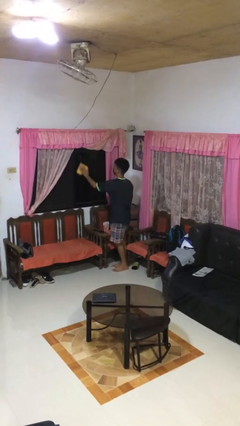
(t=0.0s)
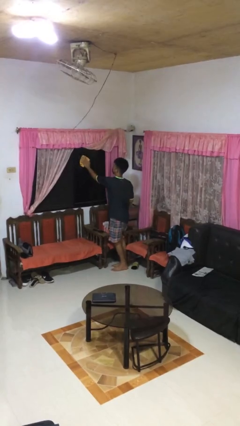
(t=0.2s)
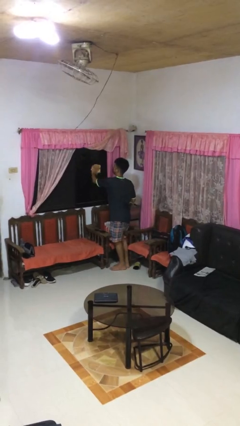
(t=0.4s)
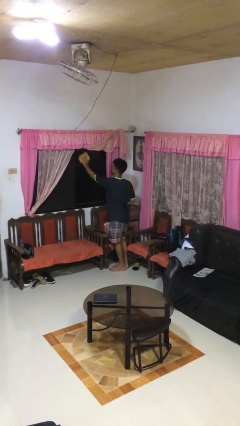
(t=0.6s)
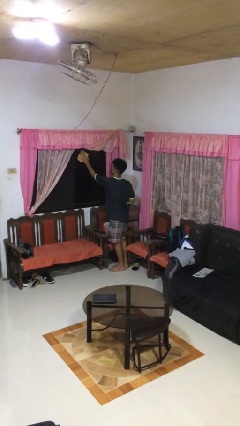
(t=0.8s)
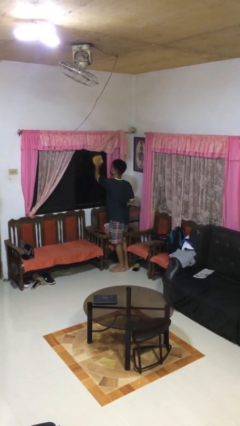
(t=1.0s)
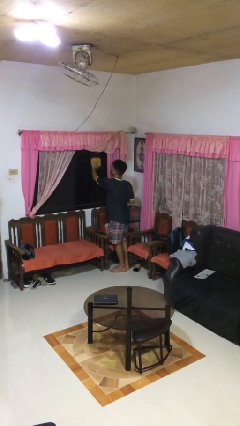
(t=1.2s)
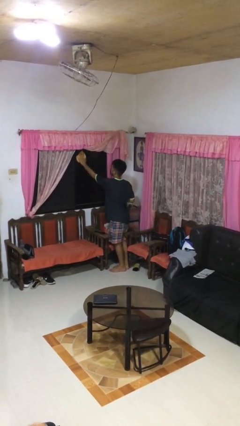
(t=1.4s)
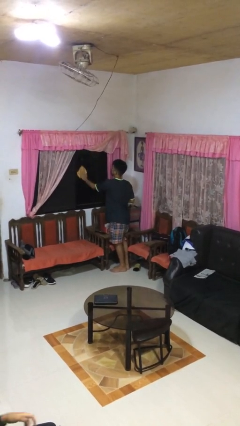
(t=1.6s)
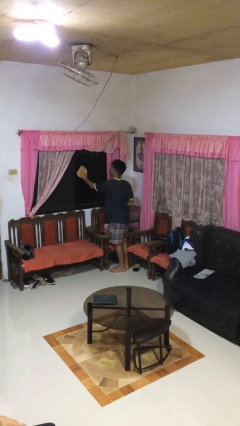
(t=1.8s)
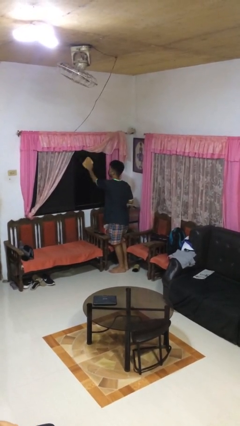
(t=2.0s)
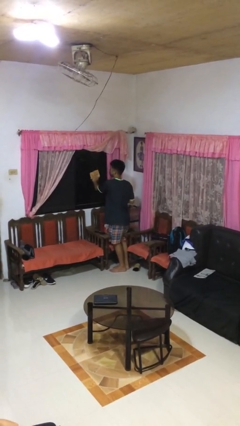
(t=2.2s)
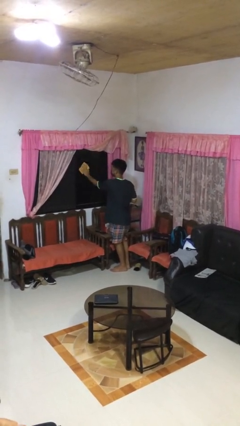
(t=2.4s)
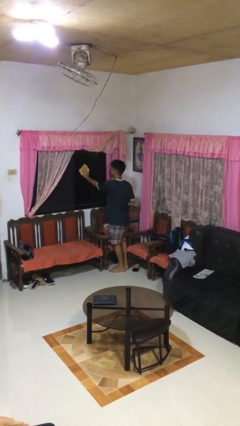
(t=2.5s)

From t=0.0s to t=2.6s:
person washes window

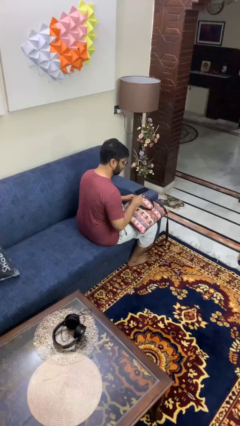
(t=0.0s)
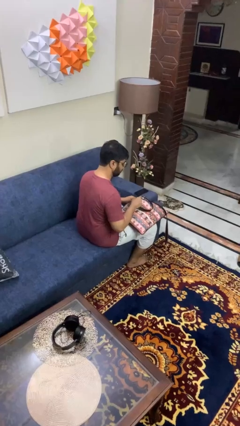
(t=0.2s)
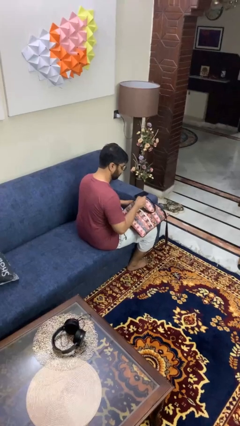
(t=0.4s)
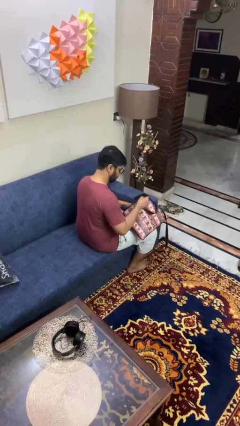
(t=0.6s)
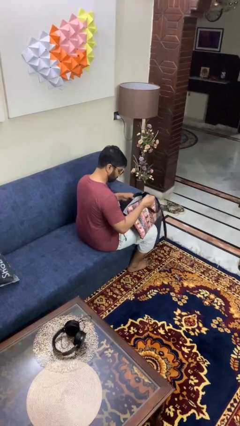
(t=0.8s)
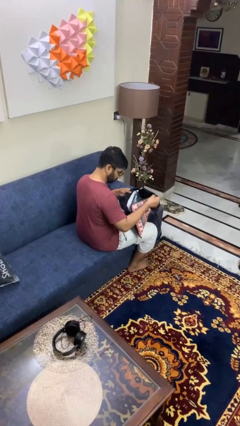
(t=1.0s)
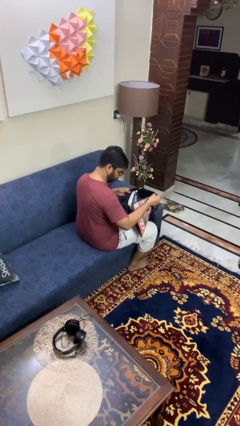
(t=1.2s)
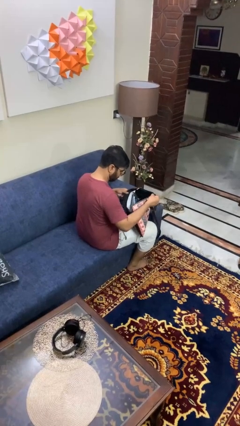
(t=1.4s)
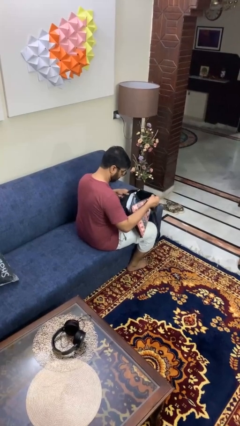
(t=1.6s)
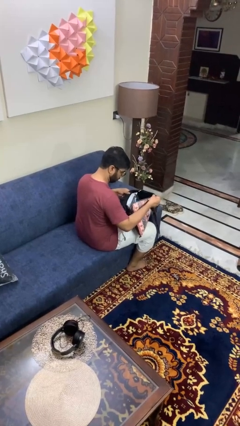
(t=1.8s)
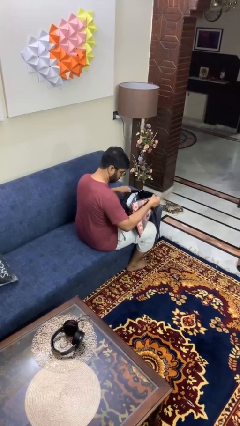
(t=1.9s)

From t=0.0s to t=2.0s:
person searches in purse

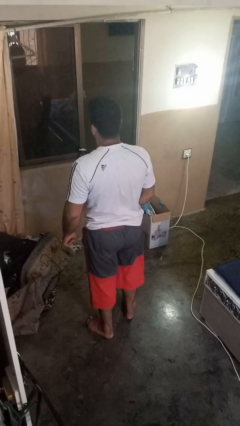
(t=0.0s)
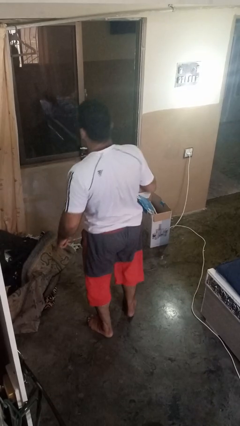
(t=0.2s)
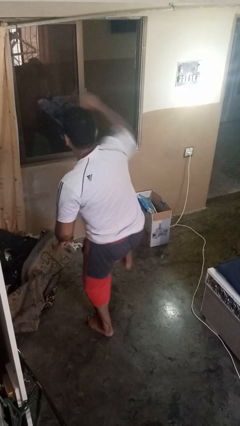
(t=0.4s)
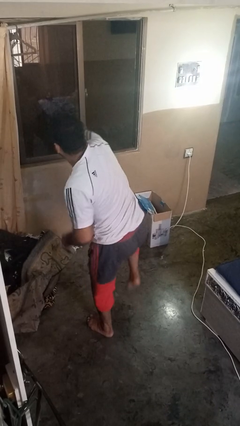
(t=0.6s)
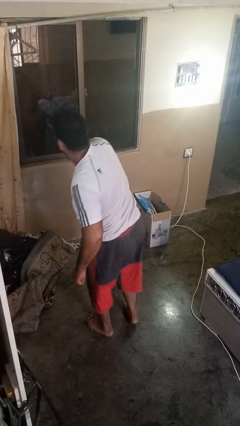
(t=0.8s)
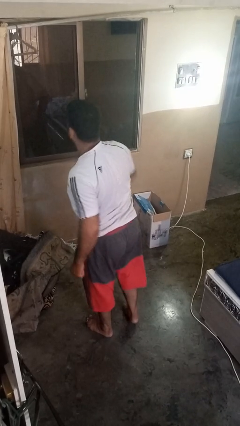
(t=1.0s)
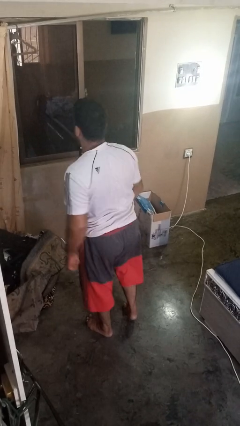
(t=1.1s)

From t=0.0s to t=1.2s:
person karate chop

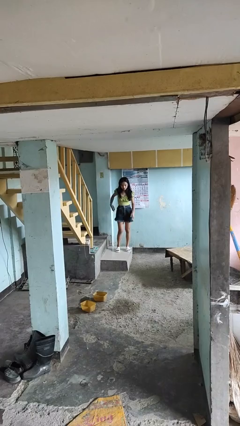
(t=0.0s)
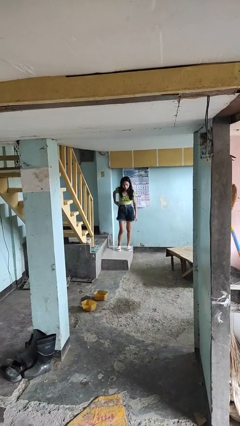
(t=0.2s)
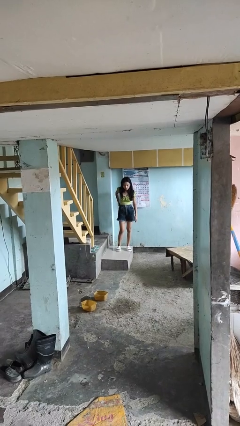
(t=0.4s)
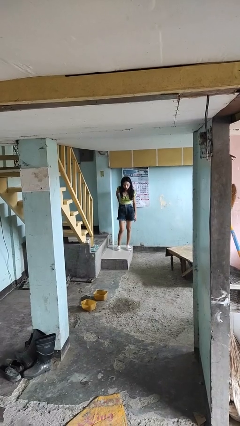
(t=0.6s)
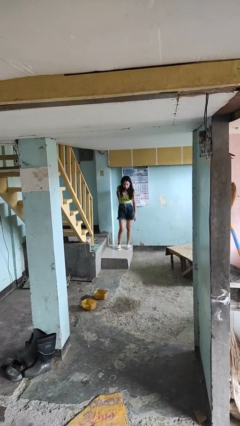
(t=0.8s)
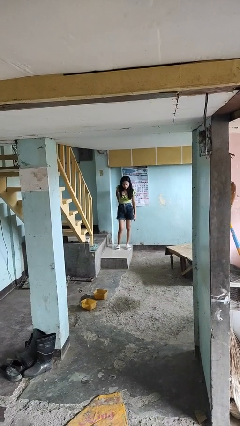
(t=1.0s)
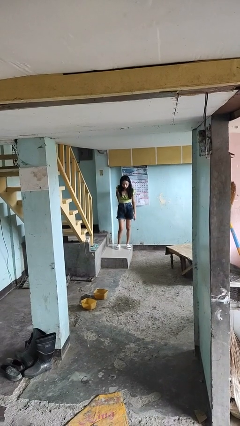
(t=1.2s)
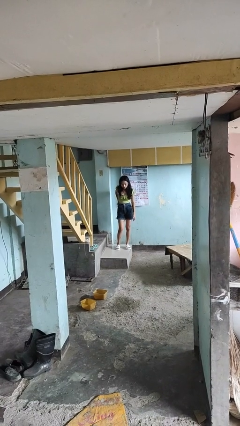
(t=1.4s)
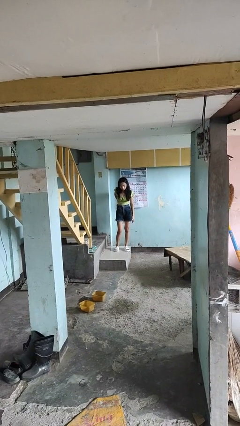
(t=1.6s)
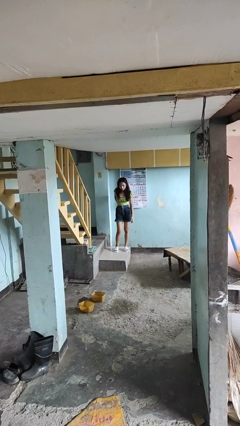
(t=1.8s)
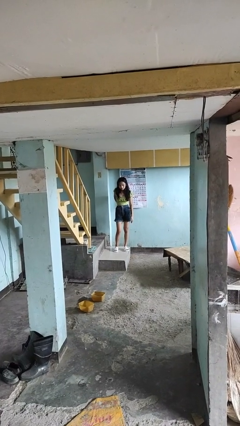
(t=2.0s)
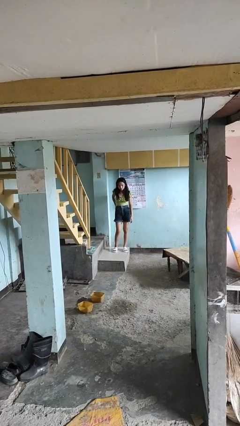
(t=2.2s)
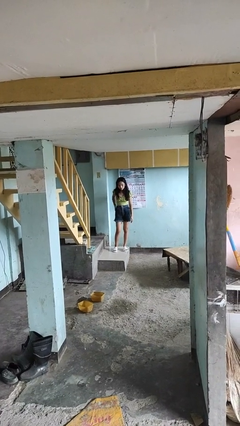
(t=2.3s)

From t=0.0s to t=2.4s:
person puts phone into pocket

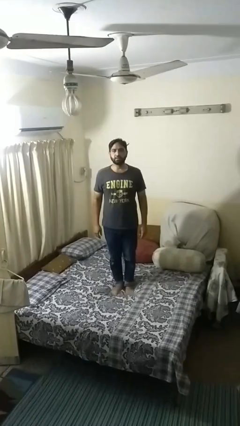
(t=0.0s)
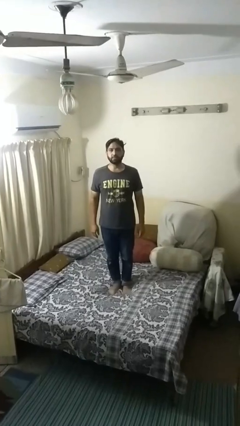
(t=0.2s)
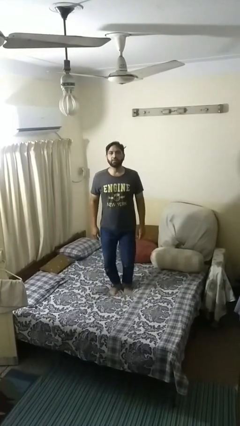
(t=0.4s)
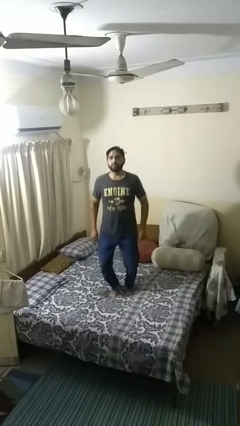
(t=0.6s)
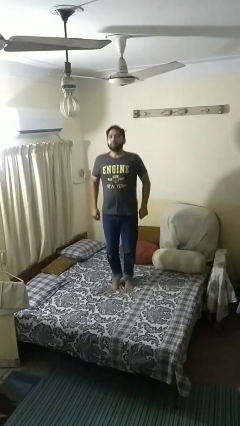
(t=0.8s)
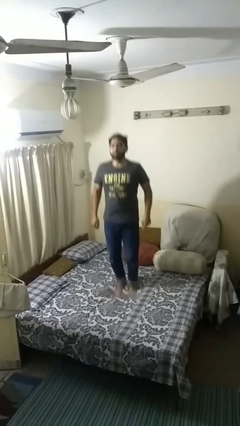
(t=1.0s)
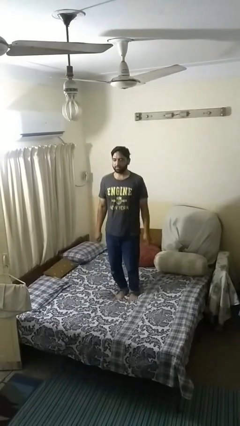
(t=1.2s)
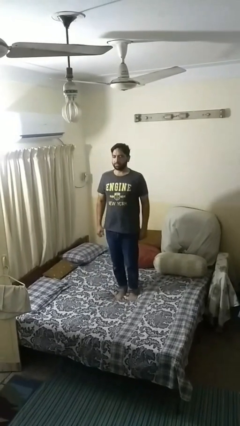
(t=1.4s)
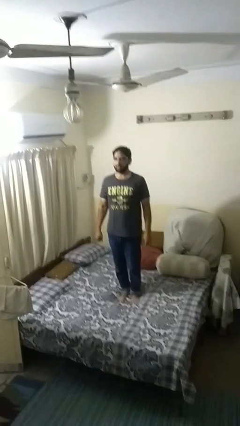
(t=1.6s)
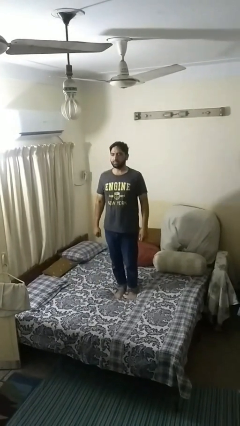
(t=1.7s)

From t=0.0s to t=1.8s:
person jumps on bed

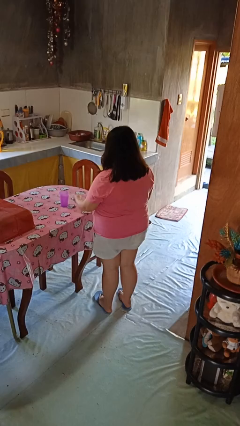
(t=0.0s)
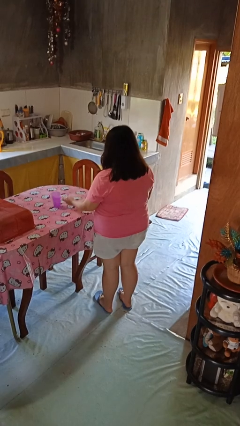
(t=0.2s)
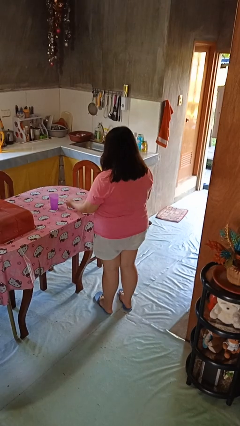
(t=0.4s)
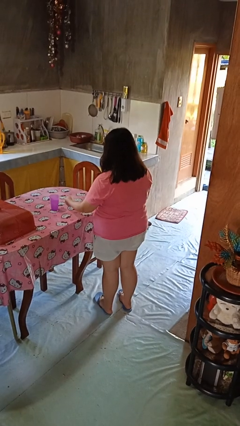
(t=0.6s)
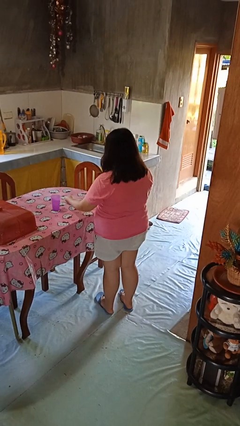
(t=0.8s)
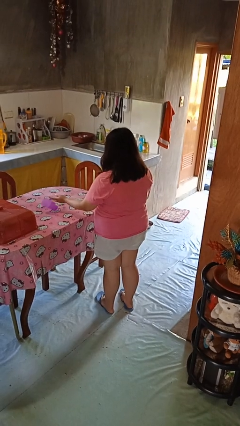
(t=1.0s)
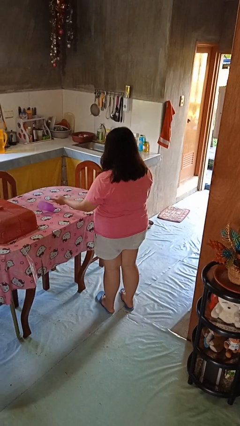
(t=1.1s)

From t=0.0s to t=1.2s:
person knocks over glass

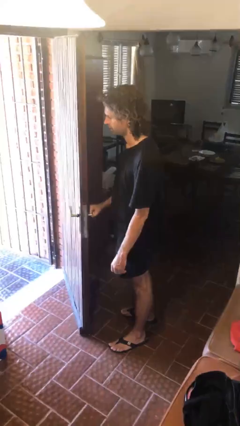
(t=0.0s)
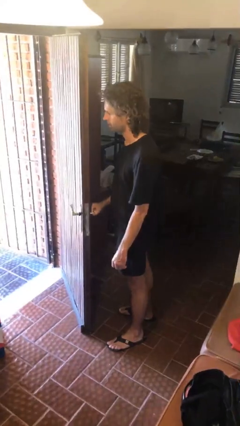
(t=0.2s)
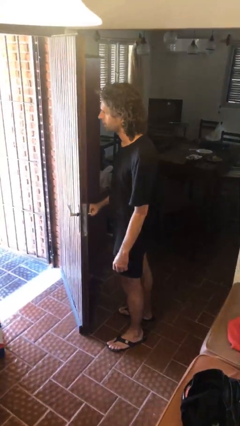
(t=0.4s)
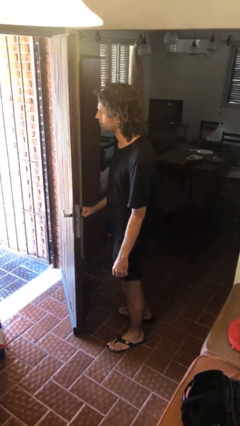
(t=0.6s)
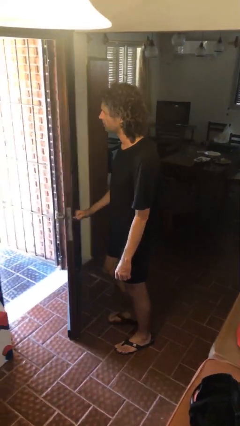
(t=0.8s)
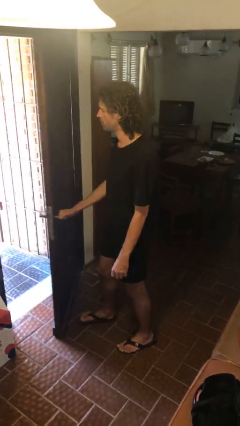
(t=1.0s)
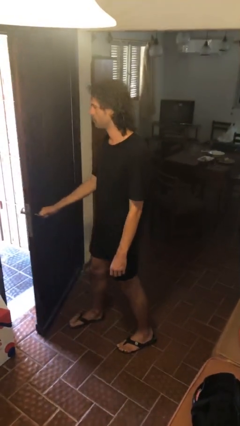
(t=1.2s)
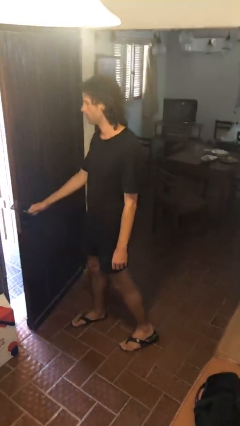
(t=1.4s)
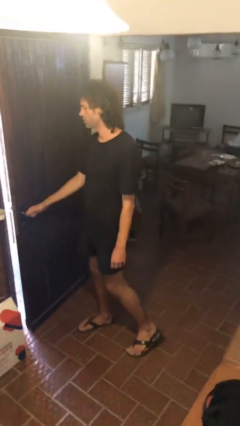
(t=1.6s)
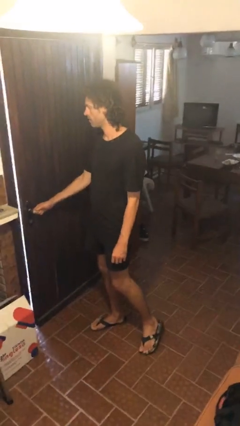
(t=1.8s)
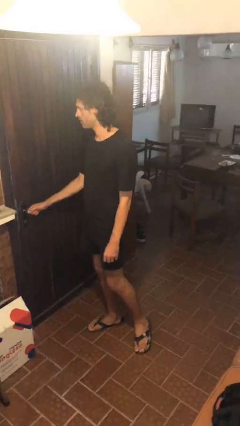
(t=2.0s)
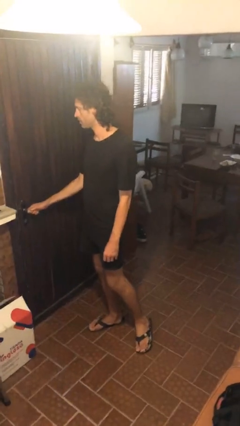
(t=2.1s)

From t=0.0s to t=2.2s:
person closes facility door

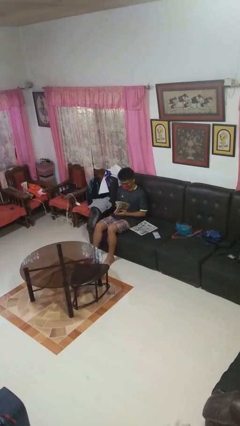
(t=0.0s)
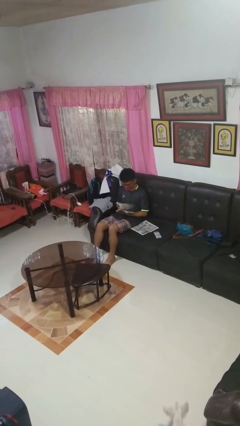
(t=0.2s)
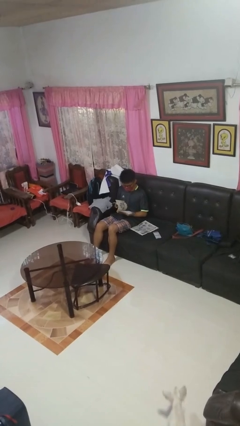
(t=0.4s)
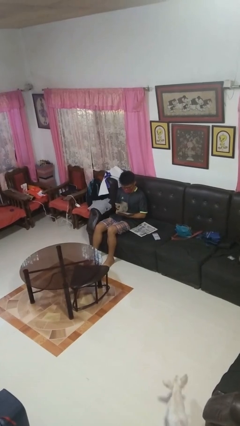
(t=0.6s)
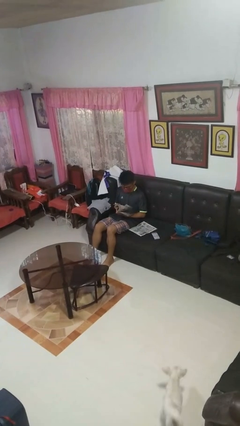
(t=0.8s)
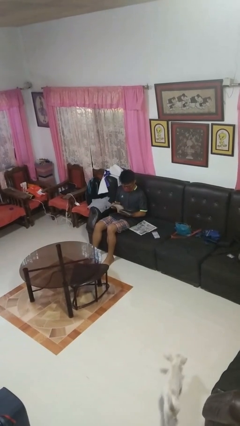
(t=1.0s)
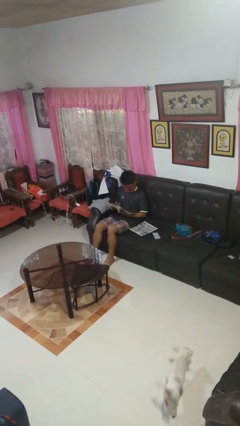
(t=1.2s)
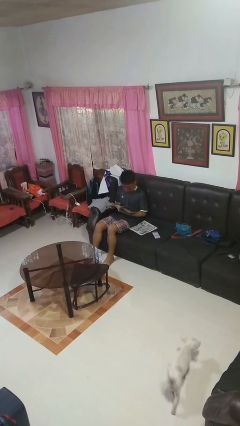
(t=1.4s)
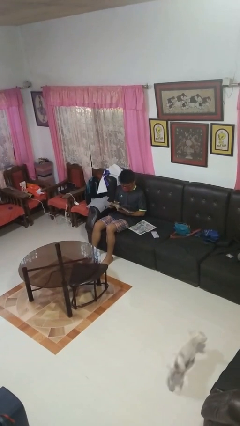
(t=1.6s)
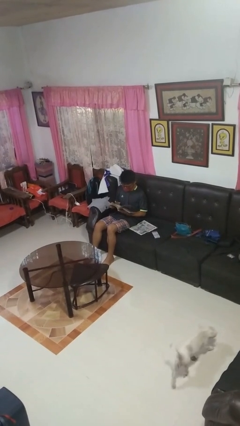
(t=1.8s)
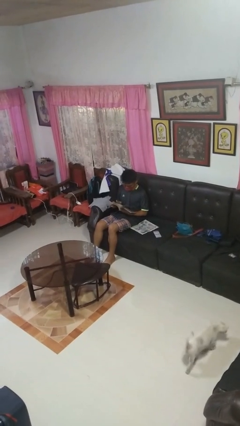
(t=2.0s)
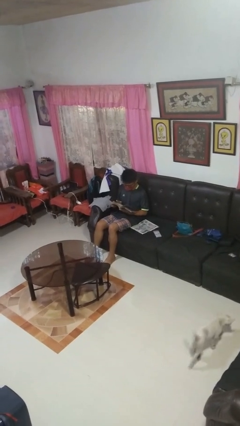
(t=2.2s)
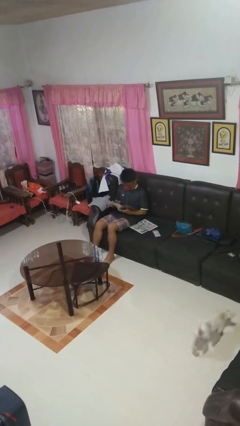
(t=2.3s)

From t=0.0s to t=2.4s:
person reads magazine

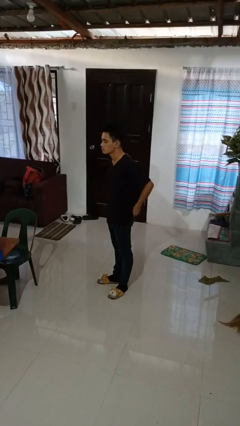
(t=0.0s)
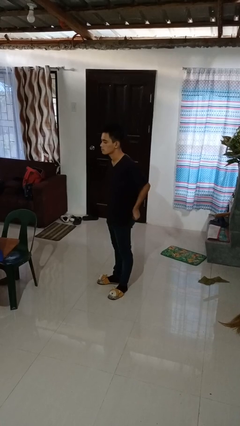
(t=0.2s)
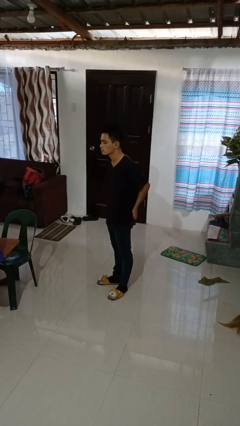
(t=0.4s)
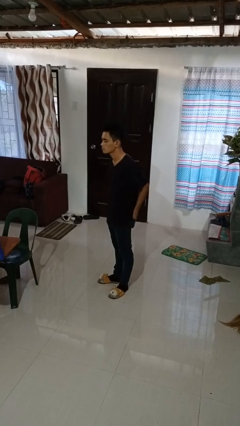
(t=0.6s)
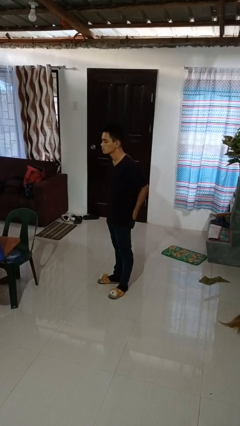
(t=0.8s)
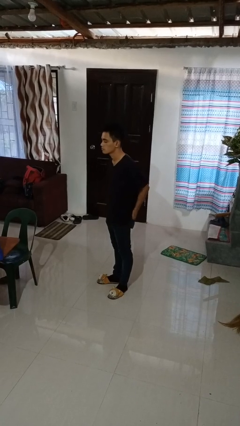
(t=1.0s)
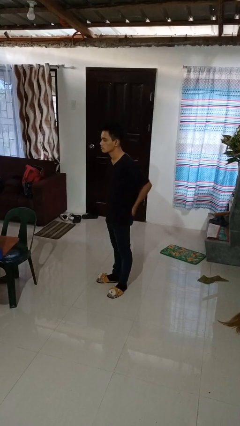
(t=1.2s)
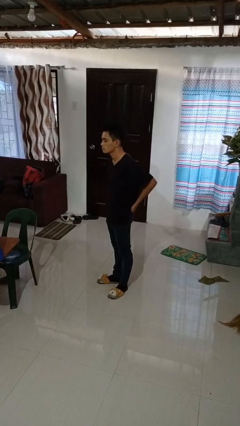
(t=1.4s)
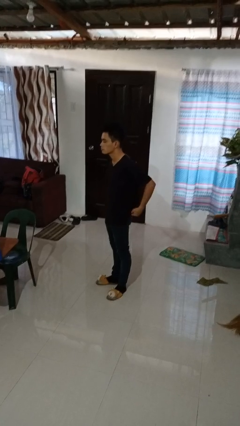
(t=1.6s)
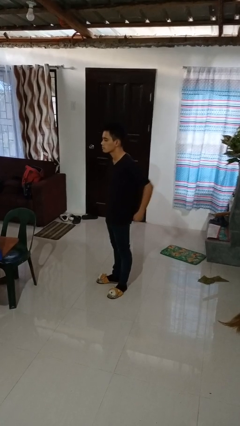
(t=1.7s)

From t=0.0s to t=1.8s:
person puts hands in back pockets
